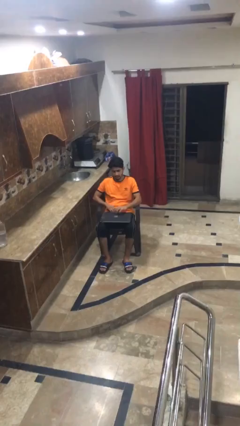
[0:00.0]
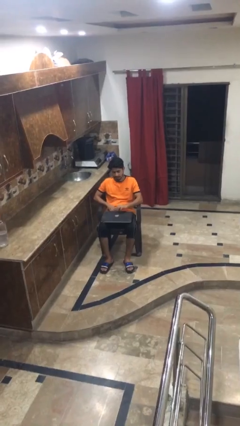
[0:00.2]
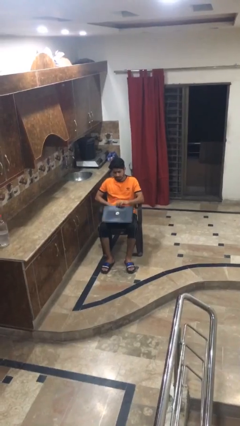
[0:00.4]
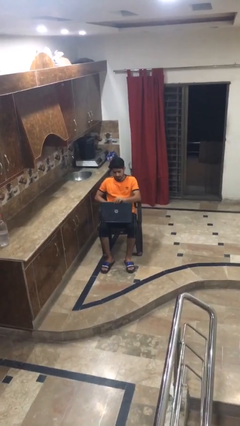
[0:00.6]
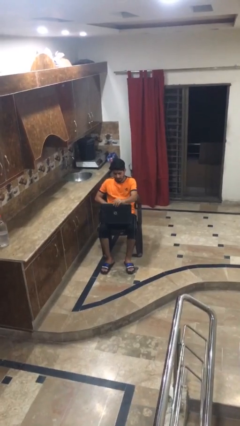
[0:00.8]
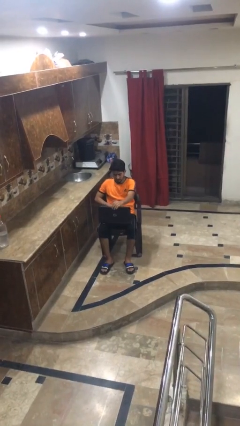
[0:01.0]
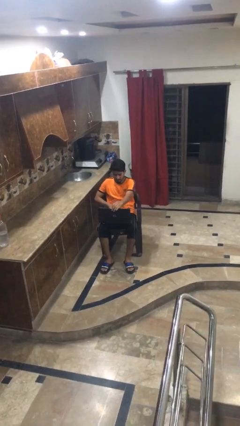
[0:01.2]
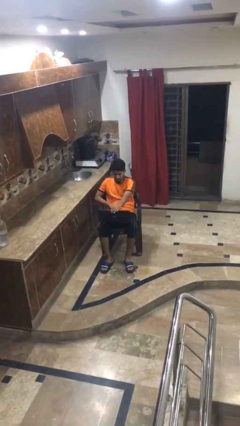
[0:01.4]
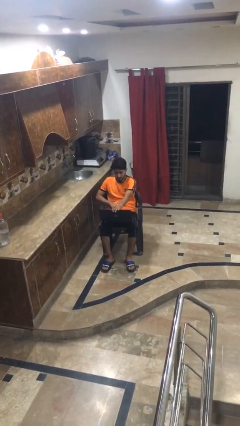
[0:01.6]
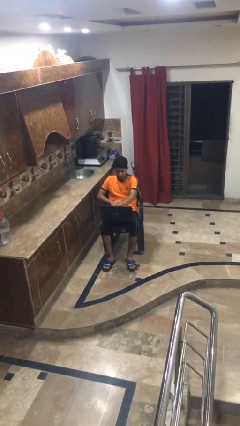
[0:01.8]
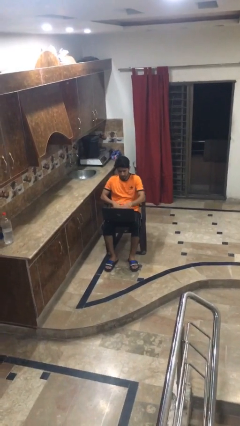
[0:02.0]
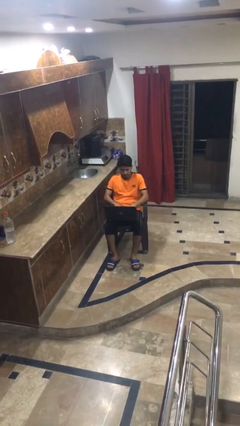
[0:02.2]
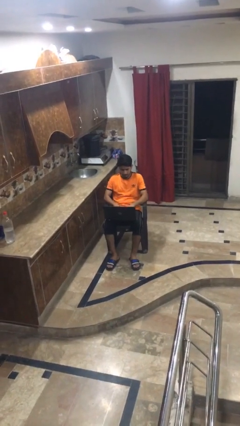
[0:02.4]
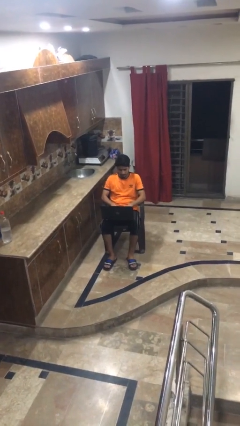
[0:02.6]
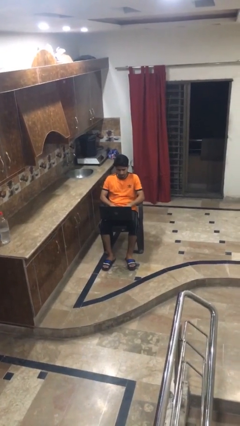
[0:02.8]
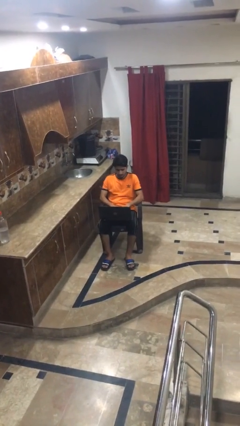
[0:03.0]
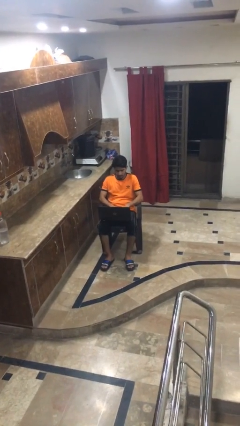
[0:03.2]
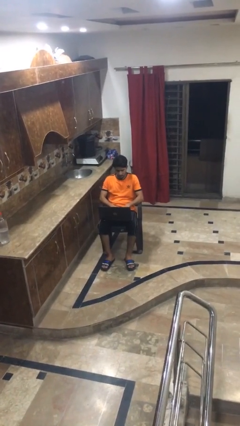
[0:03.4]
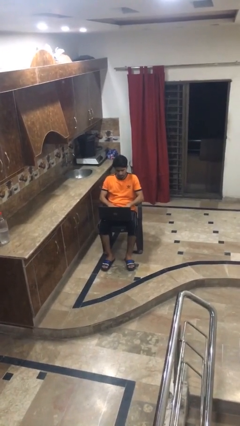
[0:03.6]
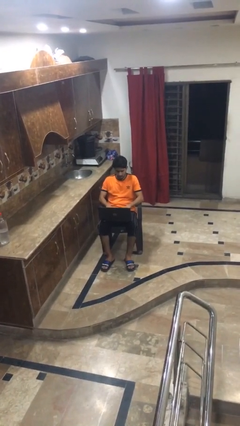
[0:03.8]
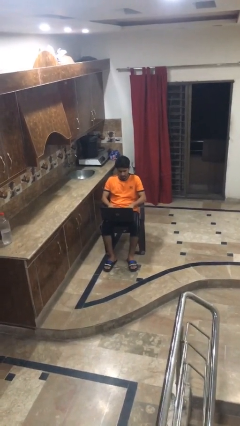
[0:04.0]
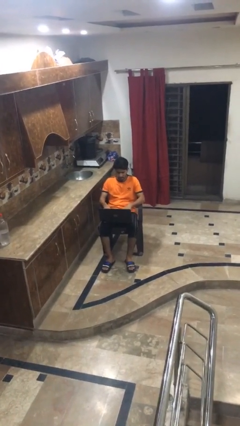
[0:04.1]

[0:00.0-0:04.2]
person opens laptop

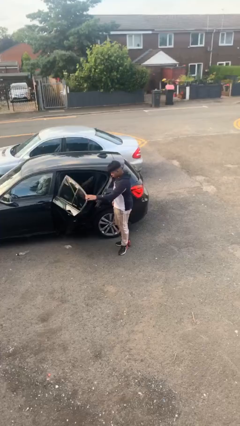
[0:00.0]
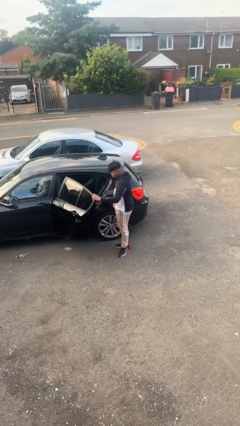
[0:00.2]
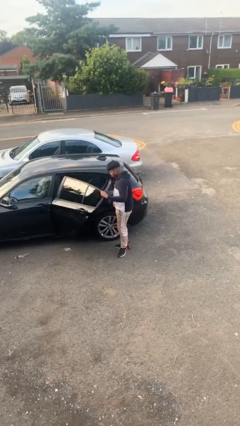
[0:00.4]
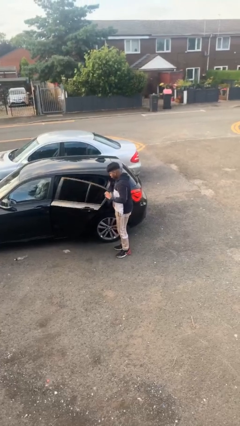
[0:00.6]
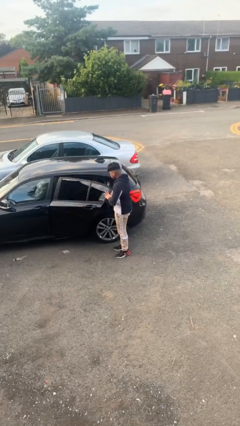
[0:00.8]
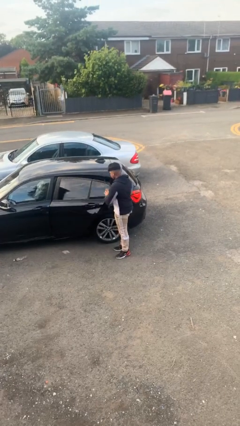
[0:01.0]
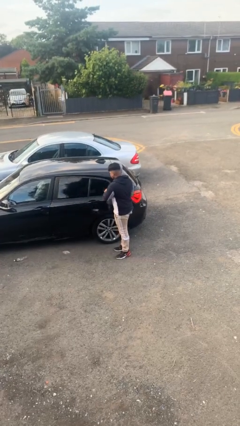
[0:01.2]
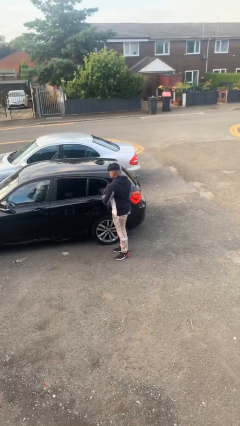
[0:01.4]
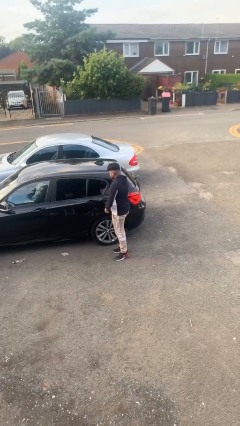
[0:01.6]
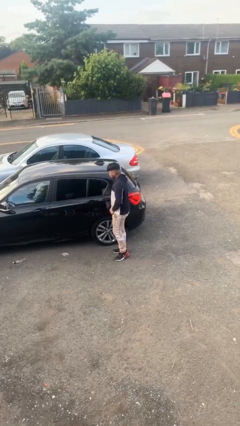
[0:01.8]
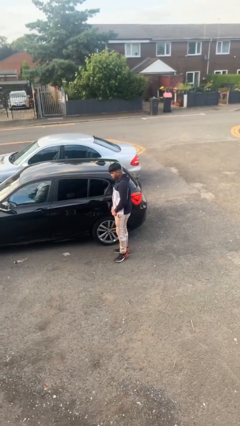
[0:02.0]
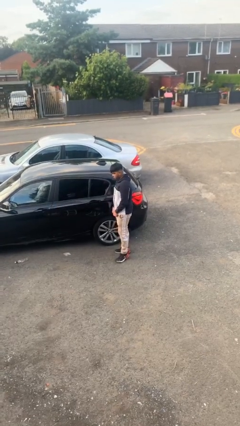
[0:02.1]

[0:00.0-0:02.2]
person closes car door

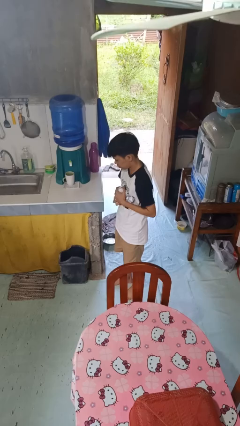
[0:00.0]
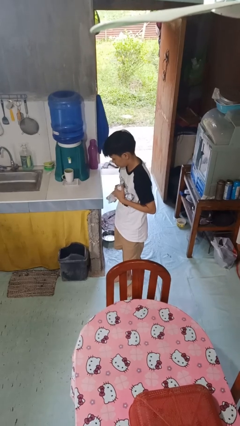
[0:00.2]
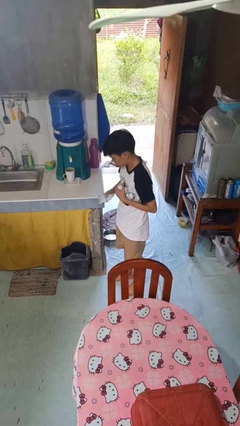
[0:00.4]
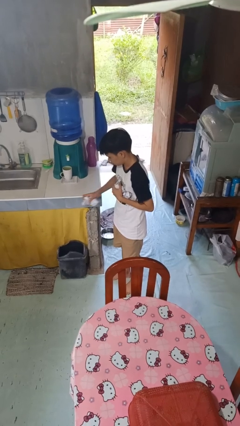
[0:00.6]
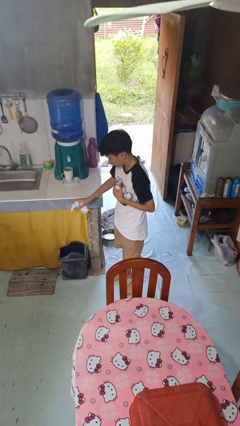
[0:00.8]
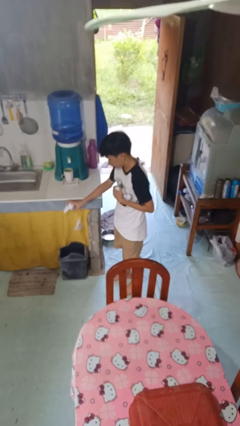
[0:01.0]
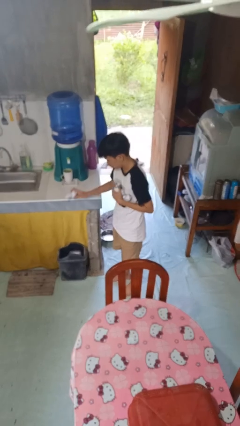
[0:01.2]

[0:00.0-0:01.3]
person discards trash

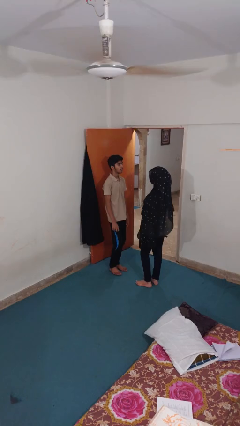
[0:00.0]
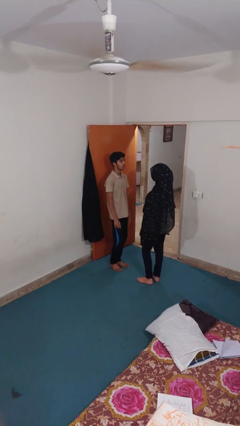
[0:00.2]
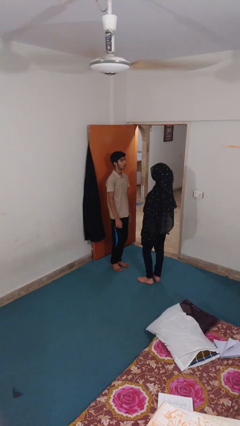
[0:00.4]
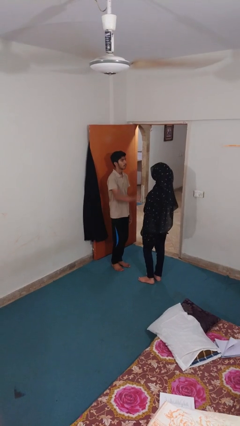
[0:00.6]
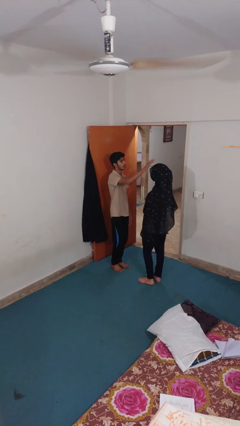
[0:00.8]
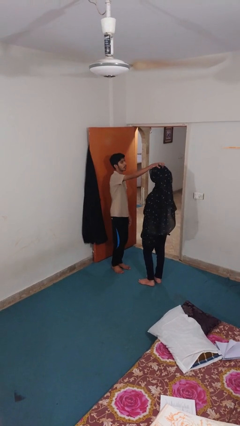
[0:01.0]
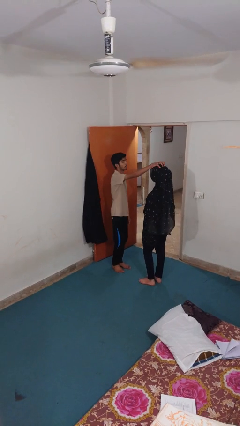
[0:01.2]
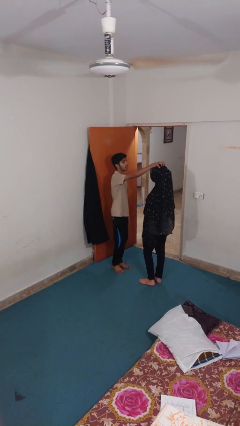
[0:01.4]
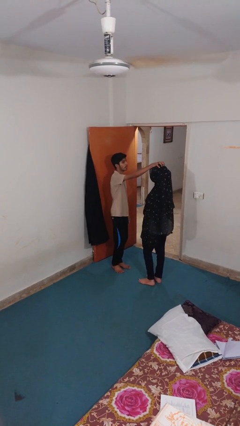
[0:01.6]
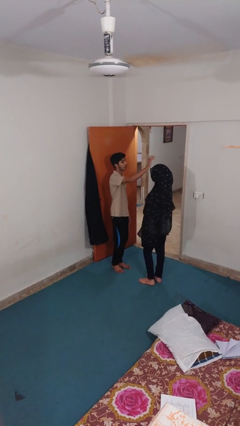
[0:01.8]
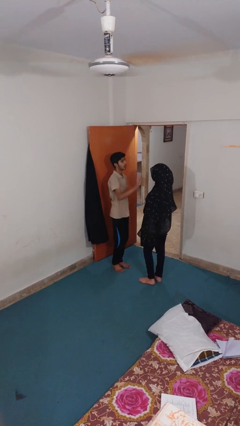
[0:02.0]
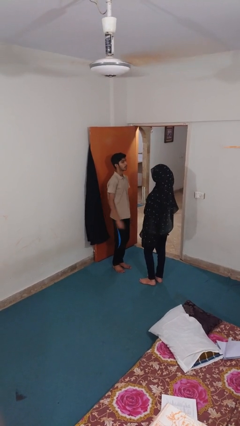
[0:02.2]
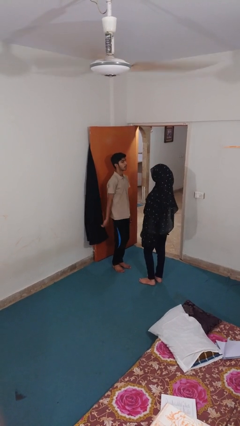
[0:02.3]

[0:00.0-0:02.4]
person grabs person by hair

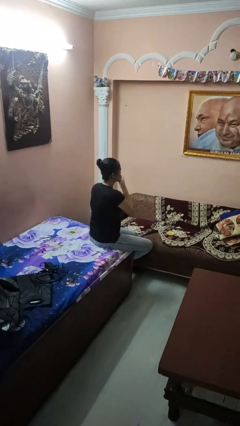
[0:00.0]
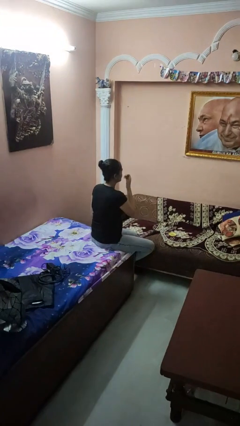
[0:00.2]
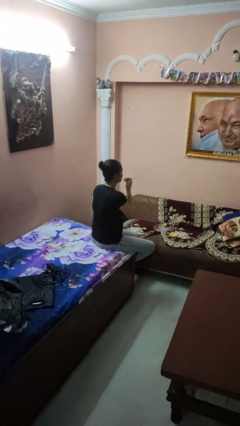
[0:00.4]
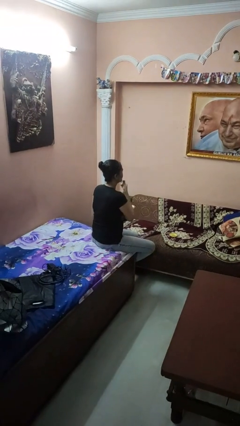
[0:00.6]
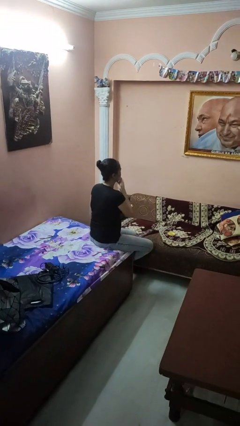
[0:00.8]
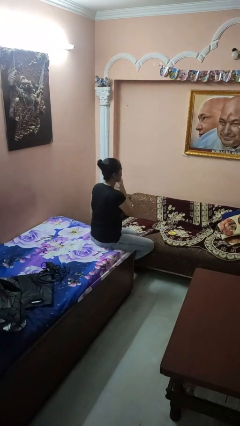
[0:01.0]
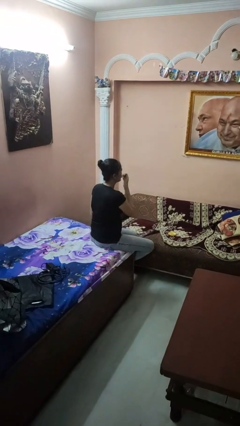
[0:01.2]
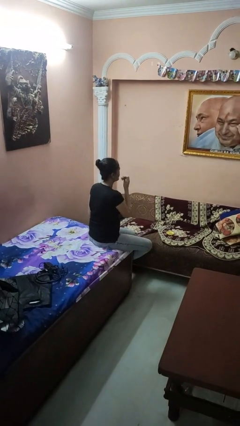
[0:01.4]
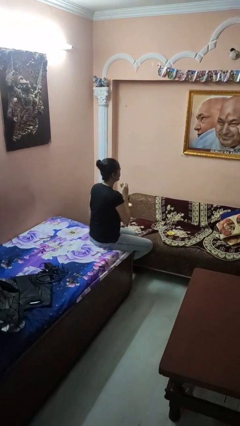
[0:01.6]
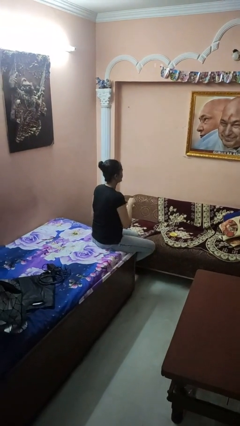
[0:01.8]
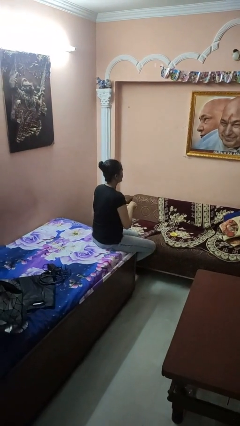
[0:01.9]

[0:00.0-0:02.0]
person applies foundation makeup

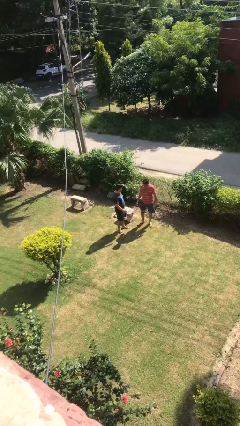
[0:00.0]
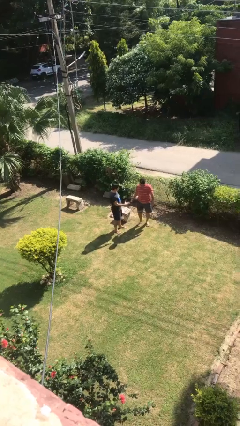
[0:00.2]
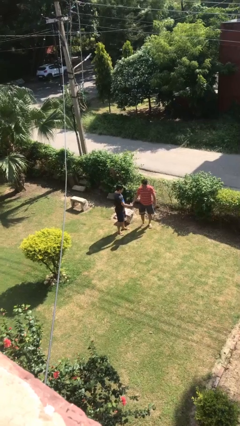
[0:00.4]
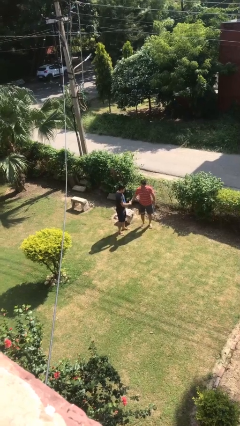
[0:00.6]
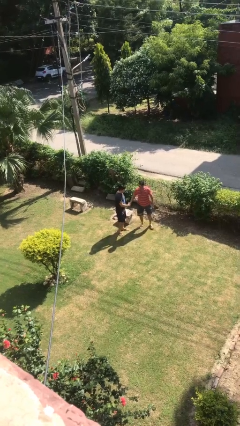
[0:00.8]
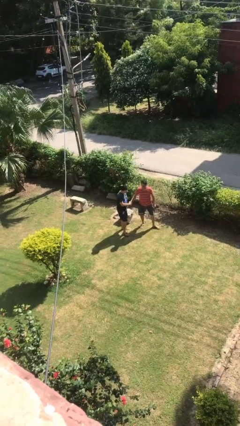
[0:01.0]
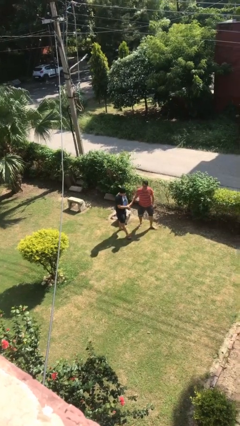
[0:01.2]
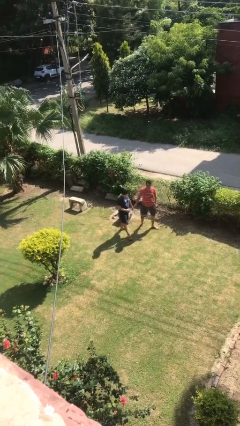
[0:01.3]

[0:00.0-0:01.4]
person shakes hand

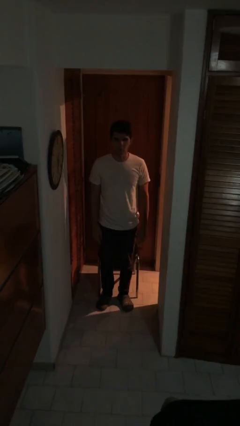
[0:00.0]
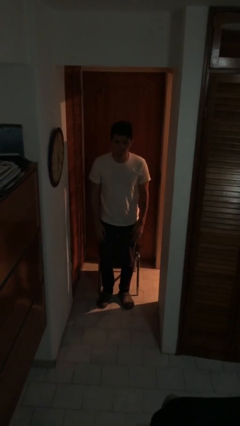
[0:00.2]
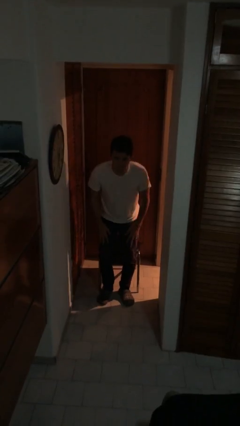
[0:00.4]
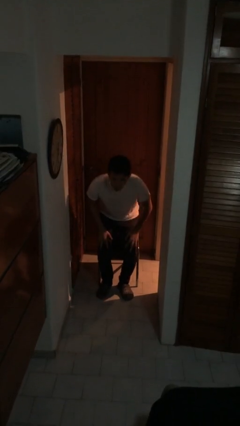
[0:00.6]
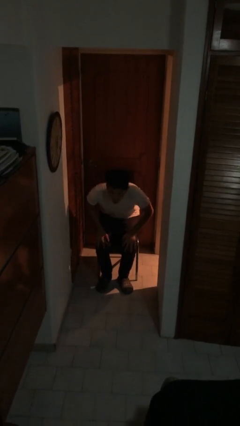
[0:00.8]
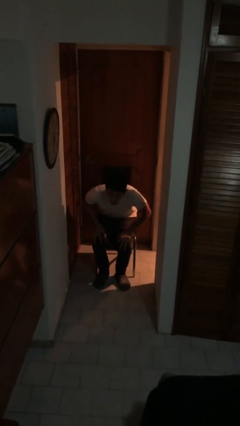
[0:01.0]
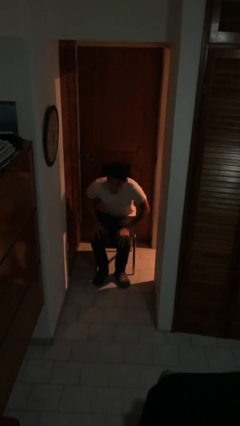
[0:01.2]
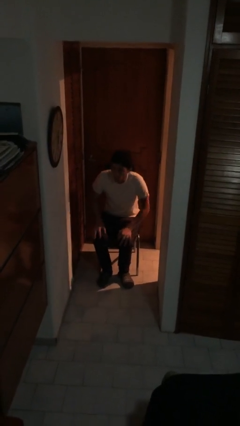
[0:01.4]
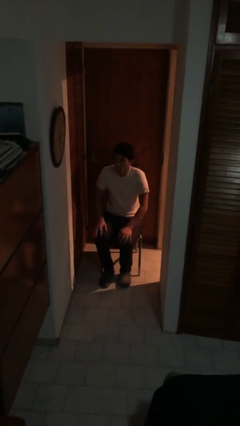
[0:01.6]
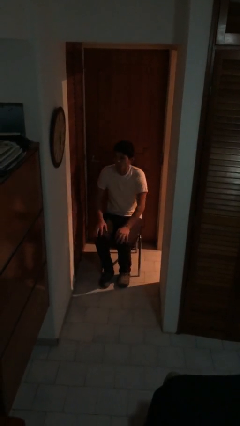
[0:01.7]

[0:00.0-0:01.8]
person sits down

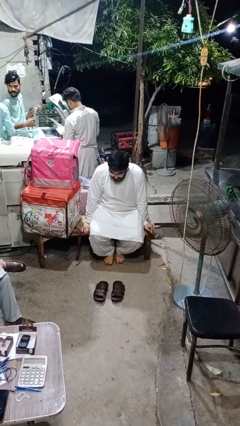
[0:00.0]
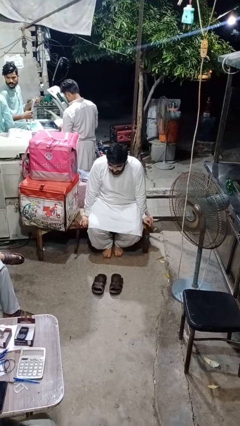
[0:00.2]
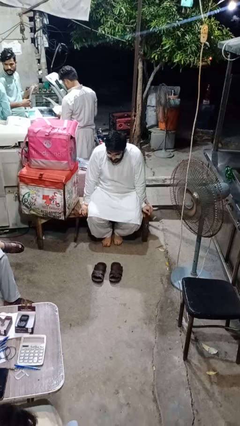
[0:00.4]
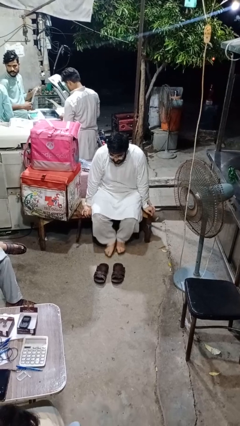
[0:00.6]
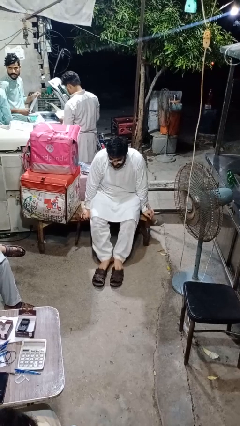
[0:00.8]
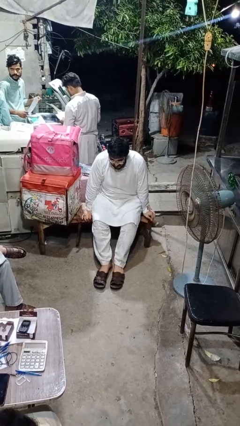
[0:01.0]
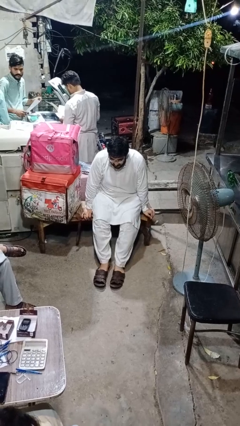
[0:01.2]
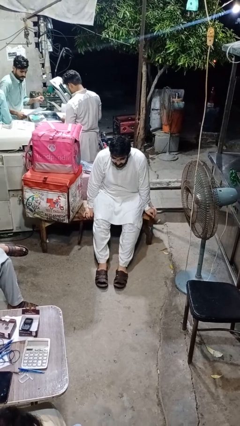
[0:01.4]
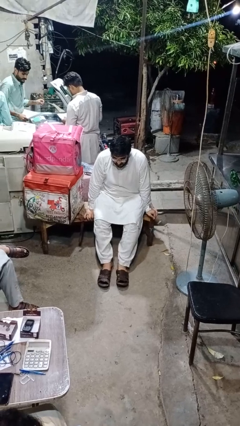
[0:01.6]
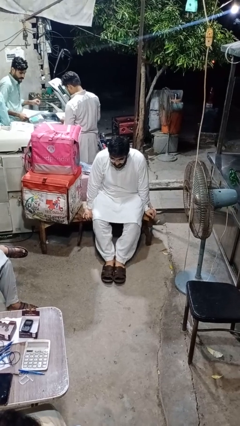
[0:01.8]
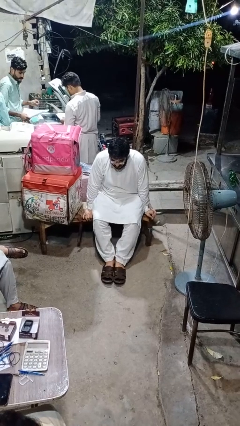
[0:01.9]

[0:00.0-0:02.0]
person puts on shoes
